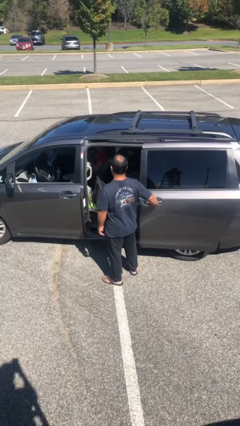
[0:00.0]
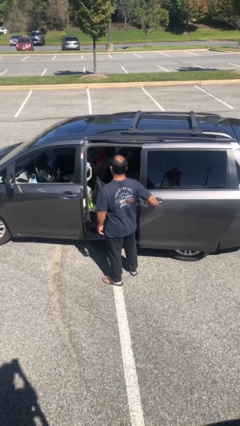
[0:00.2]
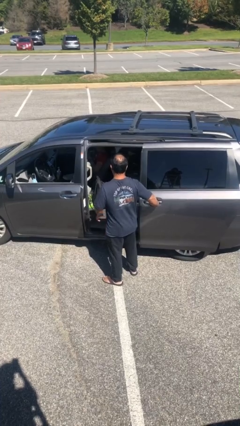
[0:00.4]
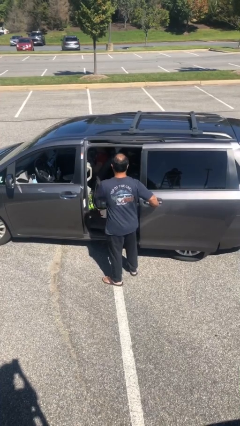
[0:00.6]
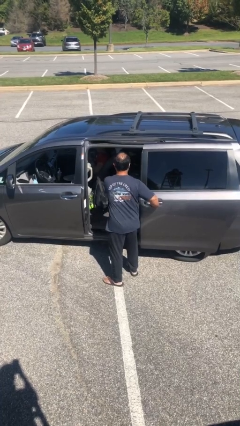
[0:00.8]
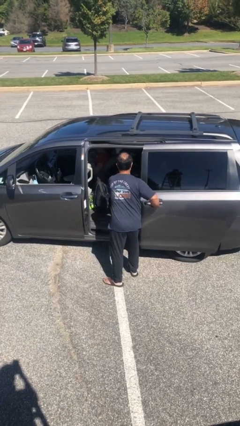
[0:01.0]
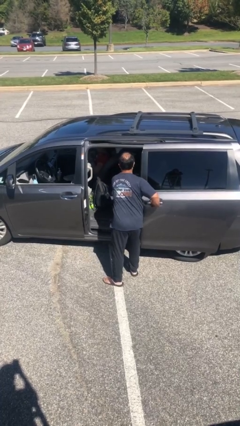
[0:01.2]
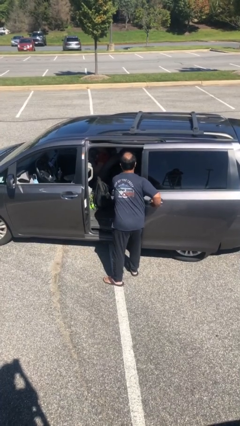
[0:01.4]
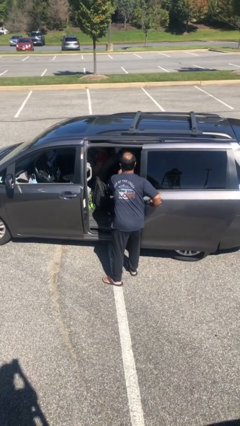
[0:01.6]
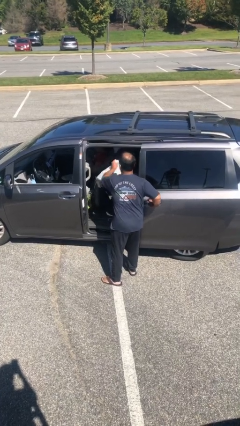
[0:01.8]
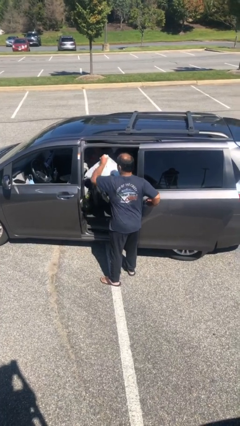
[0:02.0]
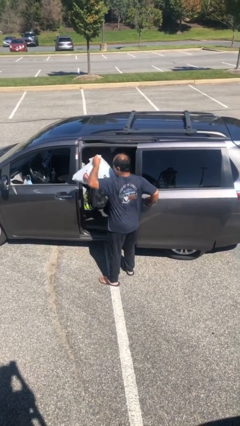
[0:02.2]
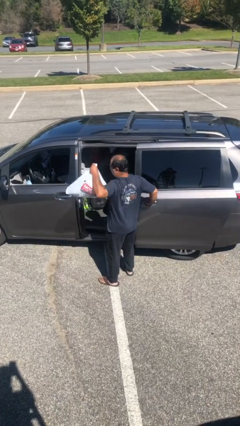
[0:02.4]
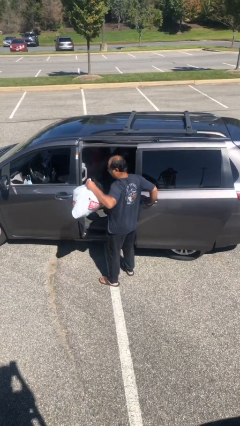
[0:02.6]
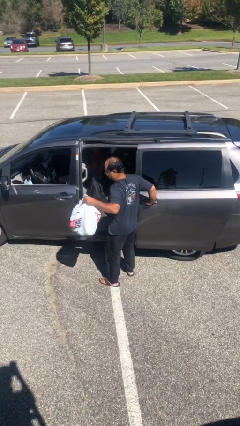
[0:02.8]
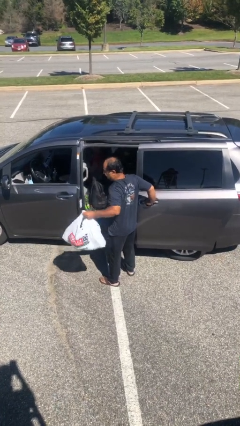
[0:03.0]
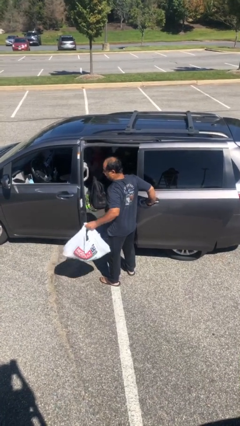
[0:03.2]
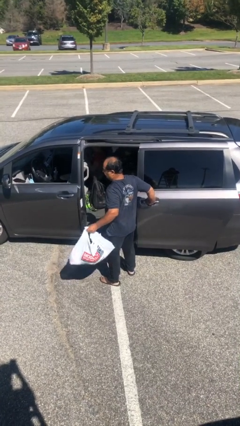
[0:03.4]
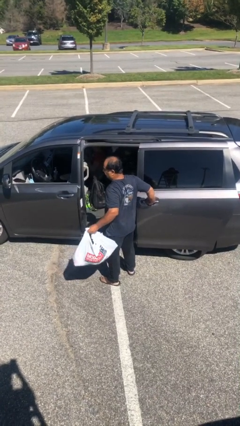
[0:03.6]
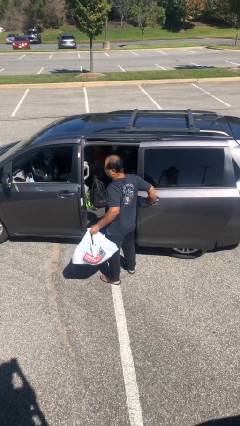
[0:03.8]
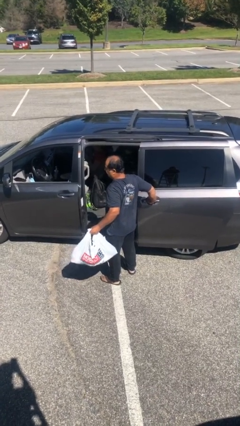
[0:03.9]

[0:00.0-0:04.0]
person unloads car

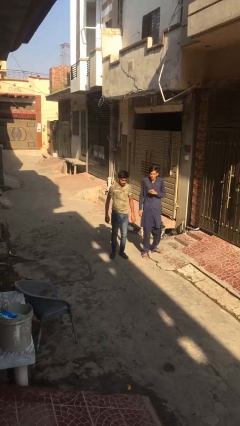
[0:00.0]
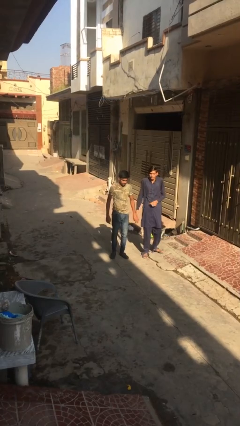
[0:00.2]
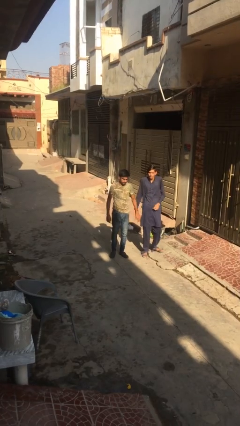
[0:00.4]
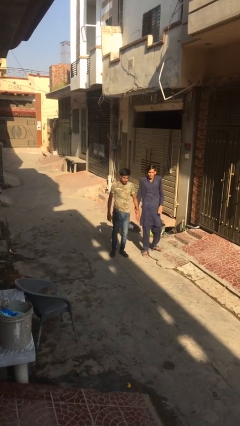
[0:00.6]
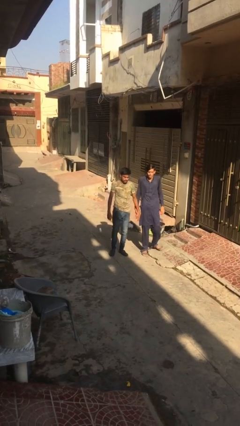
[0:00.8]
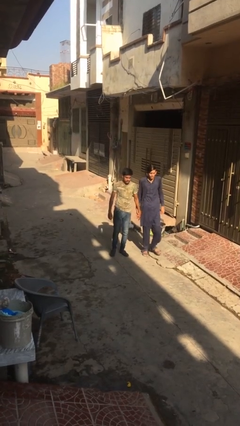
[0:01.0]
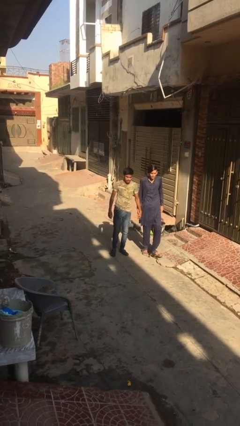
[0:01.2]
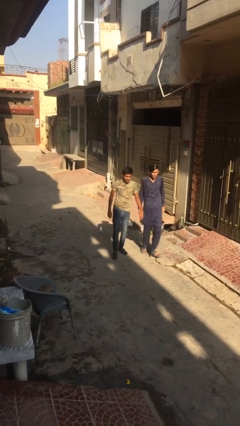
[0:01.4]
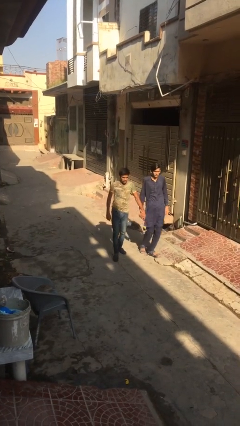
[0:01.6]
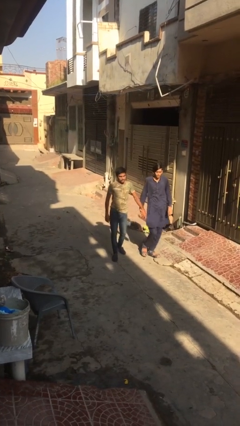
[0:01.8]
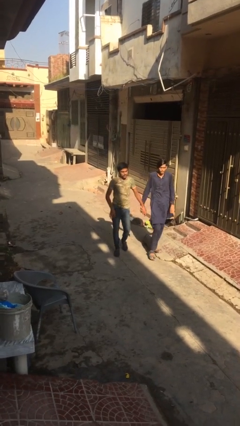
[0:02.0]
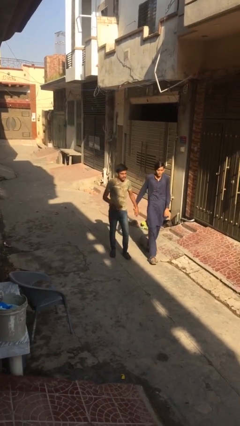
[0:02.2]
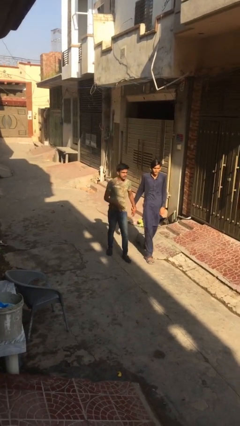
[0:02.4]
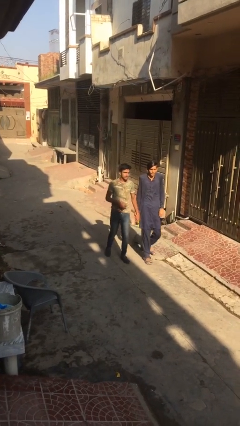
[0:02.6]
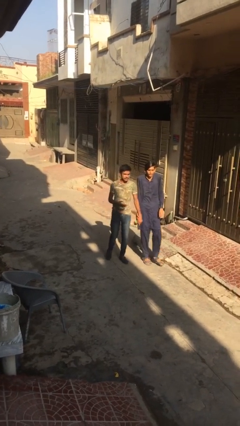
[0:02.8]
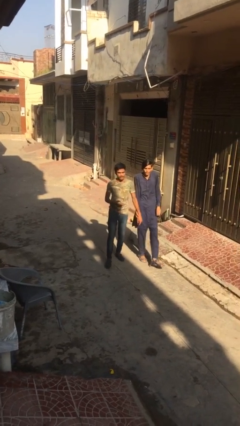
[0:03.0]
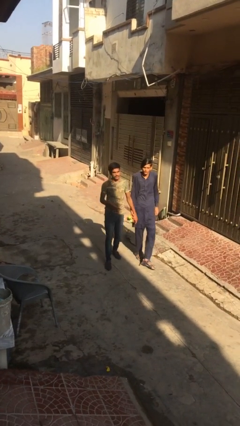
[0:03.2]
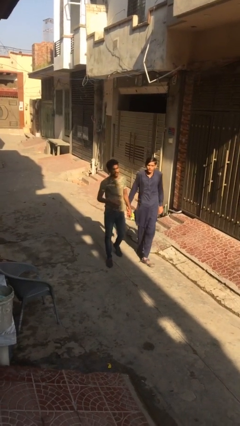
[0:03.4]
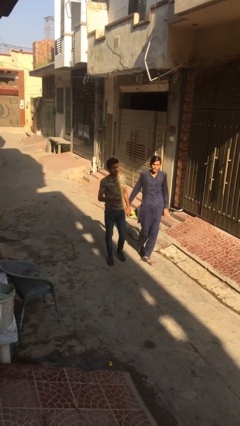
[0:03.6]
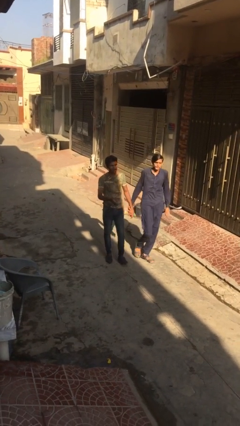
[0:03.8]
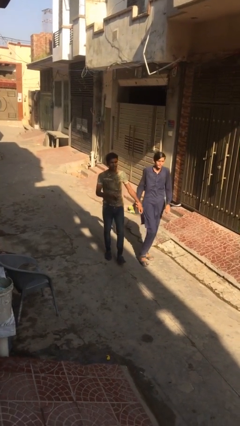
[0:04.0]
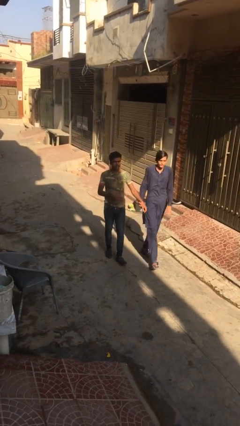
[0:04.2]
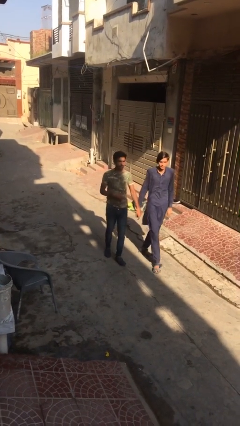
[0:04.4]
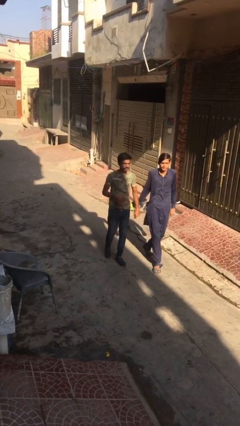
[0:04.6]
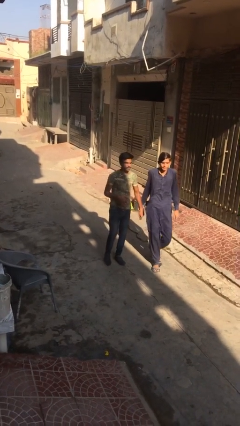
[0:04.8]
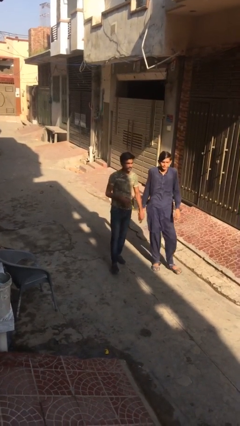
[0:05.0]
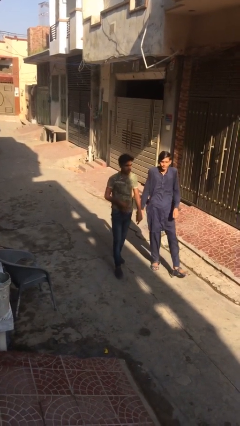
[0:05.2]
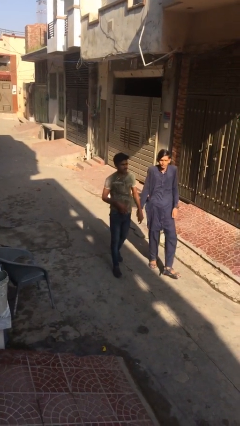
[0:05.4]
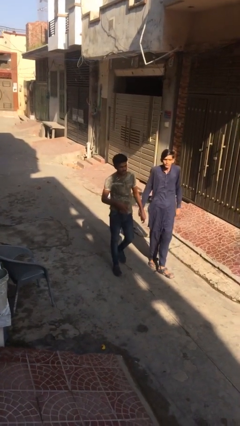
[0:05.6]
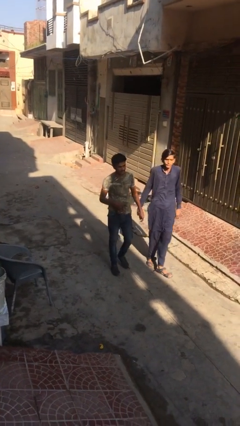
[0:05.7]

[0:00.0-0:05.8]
person holds hand

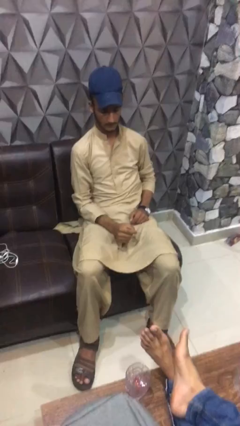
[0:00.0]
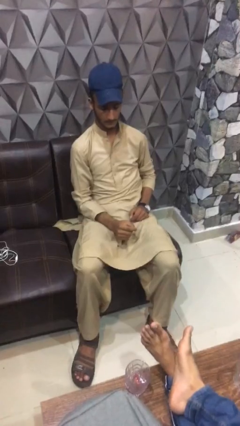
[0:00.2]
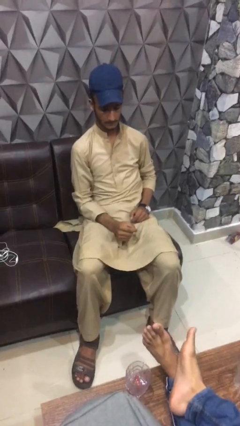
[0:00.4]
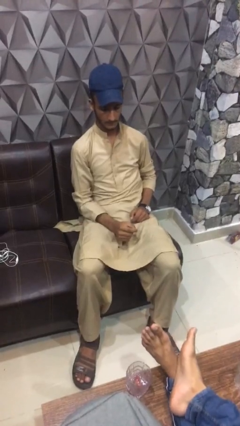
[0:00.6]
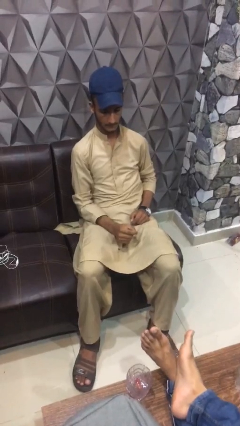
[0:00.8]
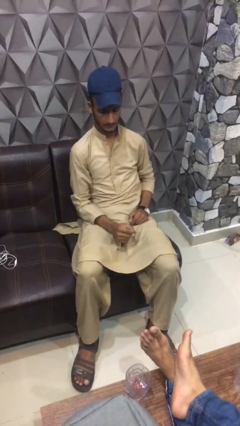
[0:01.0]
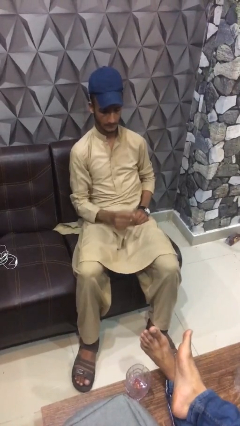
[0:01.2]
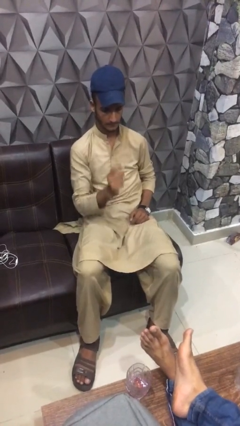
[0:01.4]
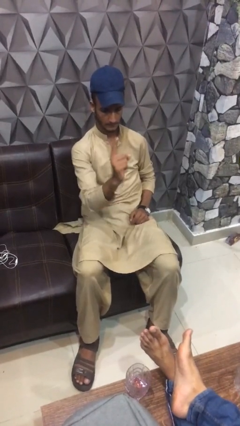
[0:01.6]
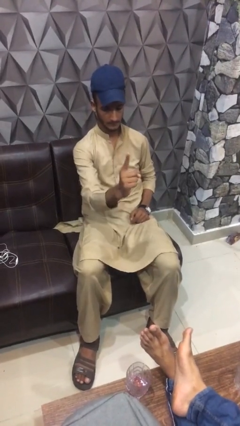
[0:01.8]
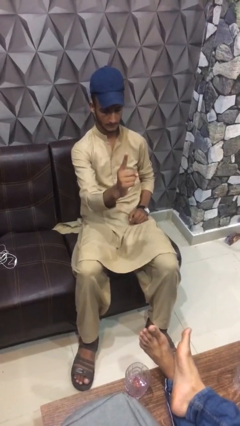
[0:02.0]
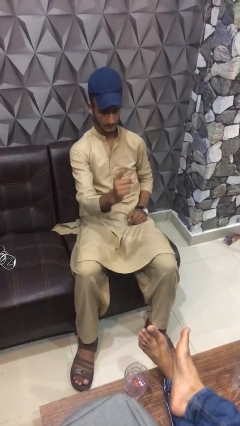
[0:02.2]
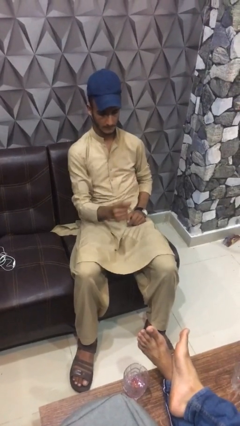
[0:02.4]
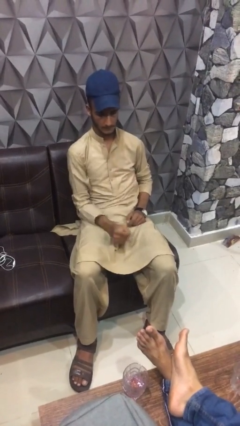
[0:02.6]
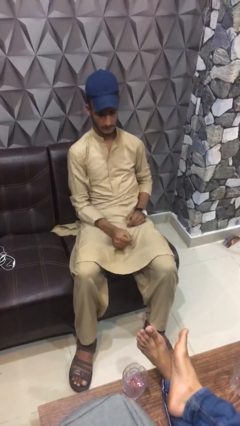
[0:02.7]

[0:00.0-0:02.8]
person gestures number one

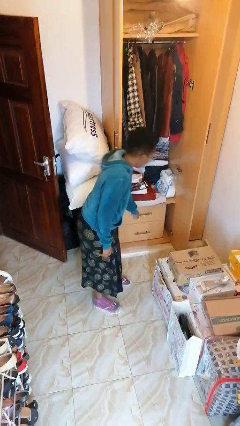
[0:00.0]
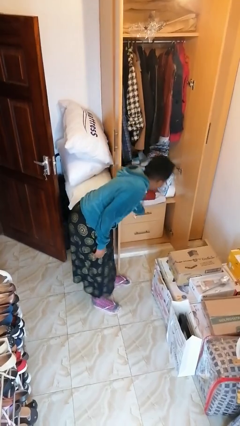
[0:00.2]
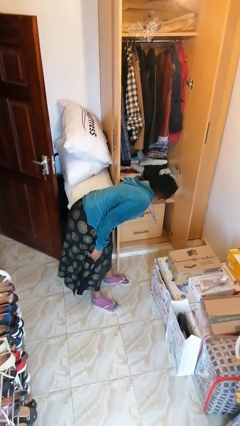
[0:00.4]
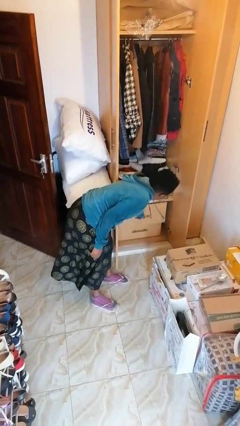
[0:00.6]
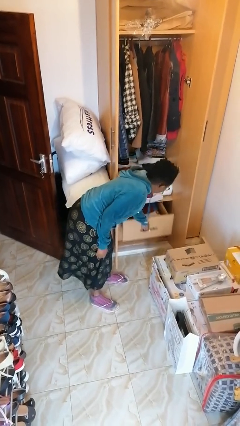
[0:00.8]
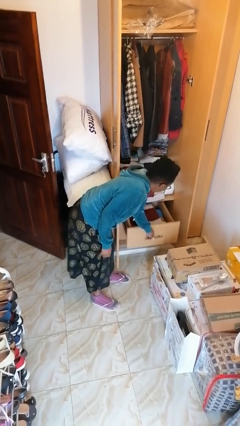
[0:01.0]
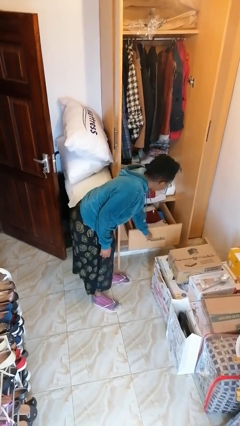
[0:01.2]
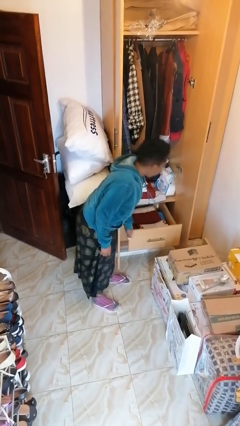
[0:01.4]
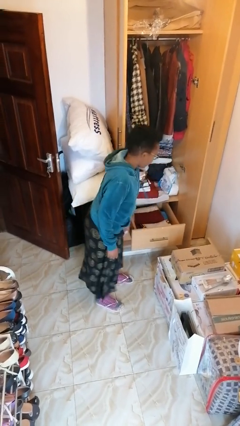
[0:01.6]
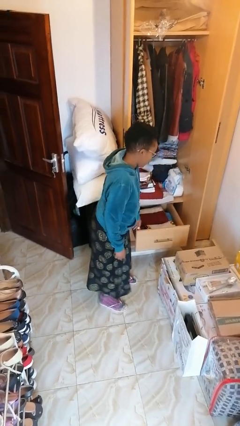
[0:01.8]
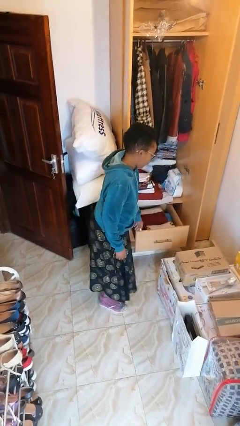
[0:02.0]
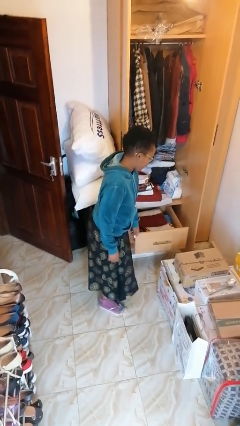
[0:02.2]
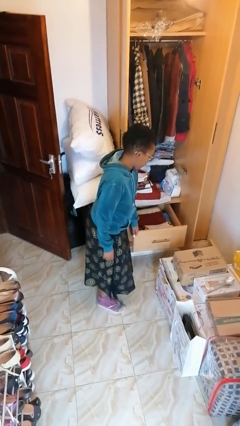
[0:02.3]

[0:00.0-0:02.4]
person opens dresser drawer

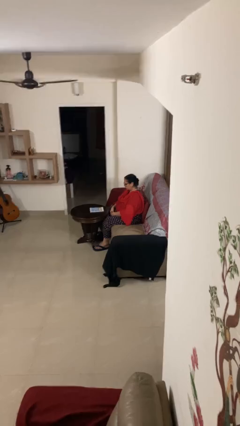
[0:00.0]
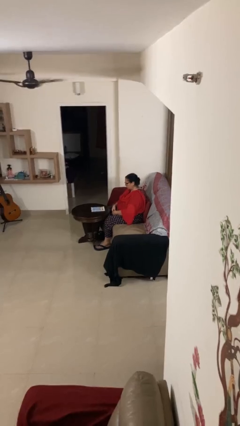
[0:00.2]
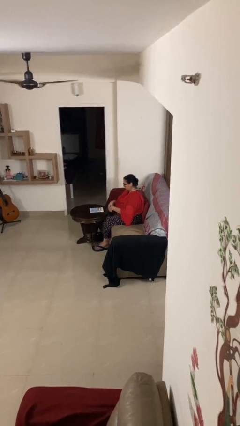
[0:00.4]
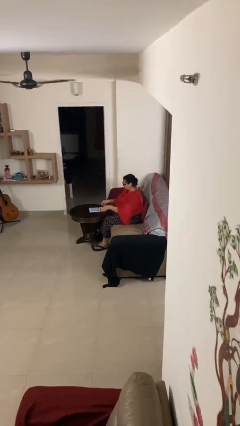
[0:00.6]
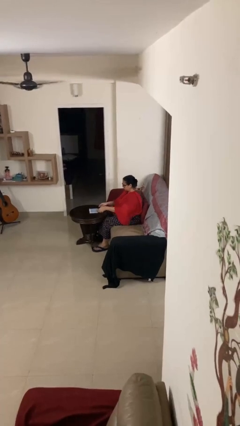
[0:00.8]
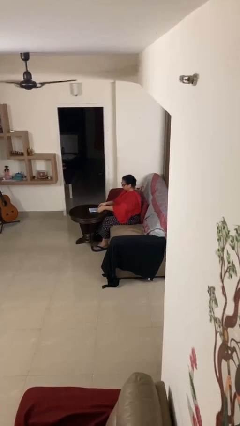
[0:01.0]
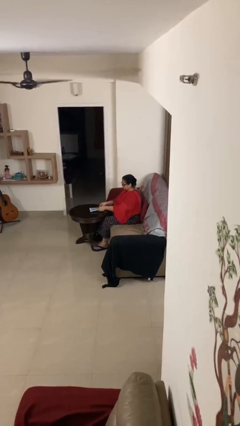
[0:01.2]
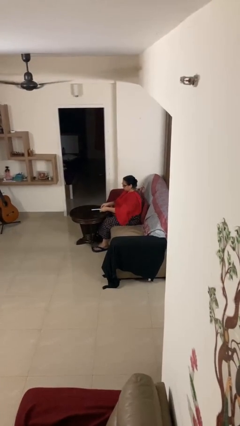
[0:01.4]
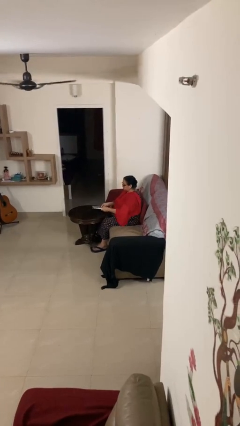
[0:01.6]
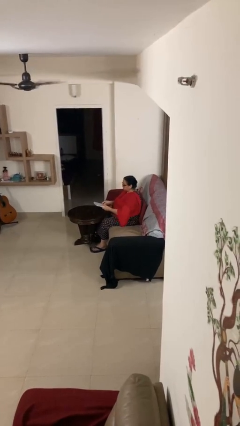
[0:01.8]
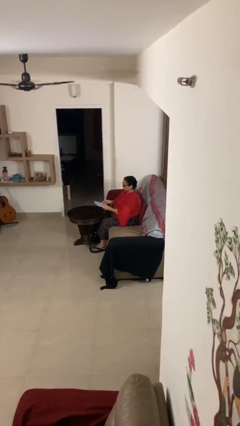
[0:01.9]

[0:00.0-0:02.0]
person picks up object from table

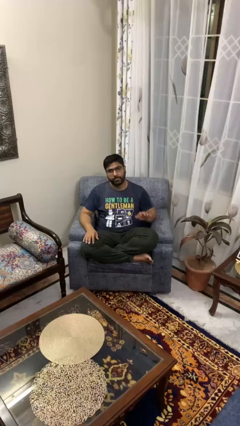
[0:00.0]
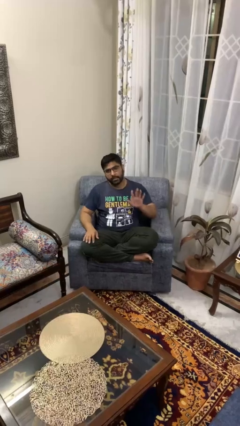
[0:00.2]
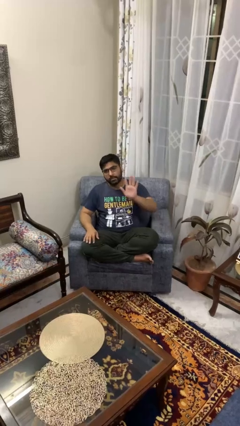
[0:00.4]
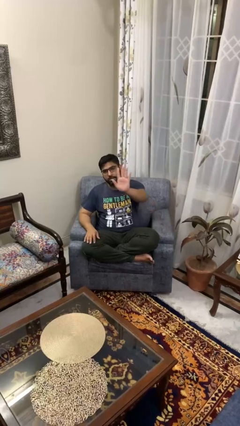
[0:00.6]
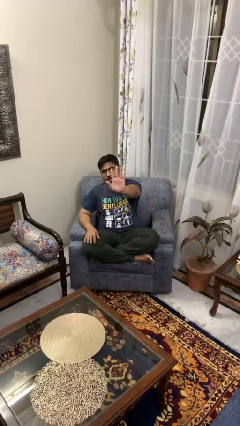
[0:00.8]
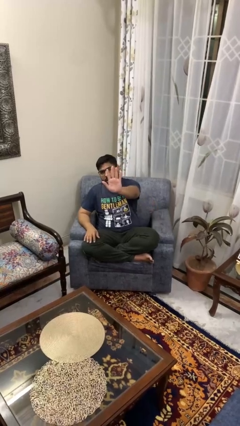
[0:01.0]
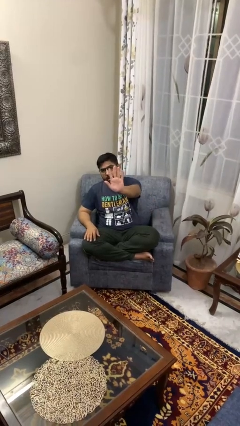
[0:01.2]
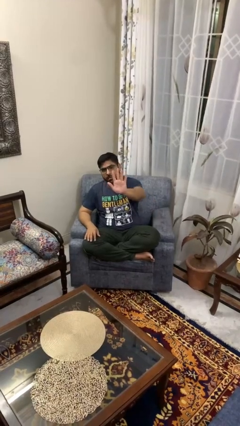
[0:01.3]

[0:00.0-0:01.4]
person gestures number five
